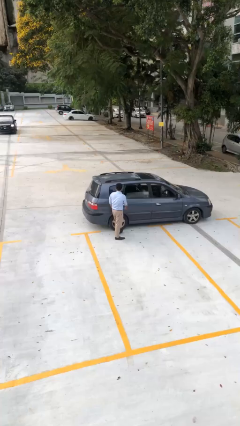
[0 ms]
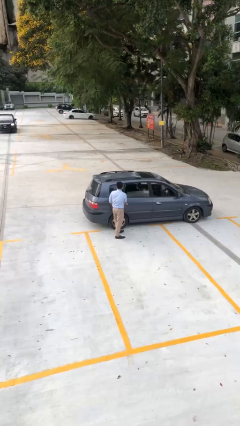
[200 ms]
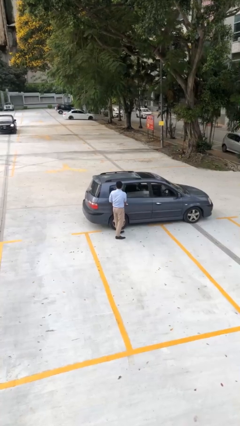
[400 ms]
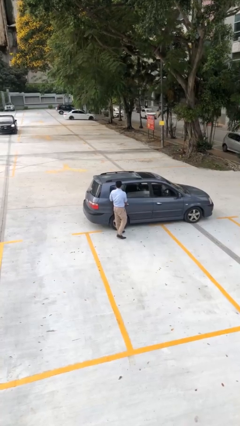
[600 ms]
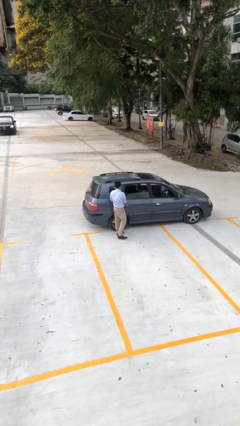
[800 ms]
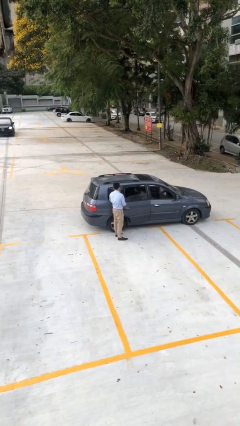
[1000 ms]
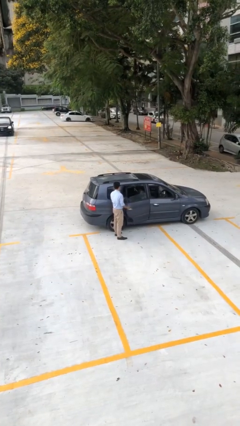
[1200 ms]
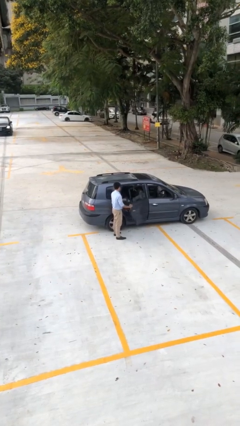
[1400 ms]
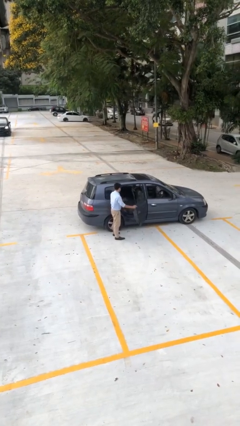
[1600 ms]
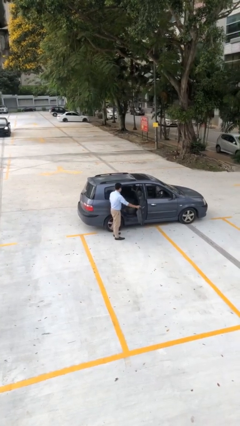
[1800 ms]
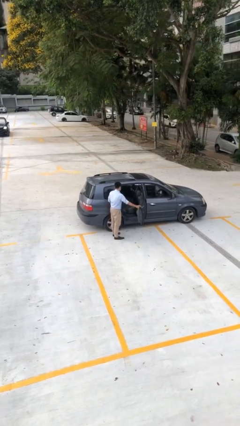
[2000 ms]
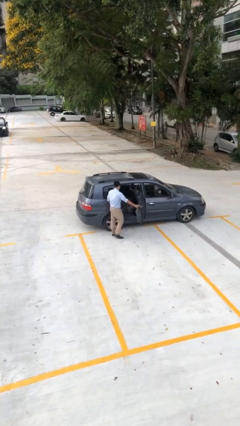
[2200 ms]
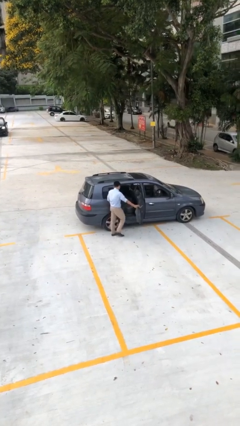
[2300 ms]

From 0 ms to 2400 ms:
person opens car door

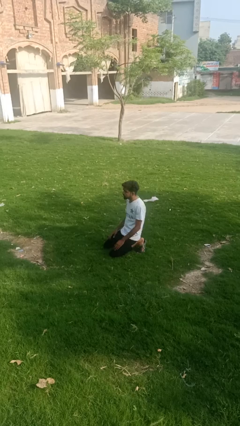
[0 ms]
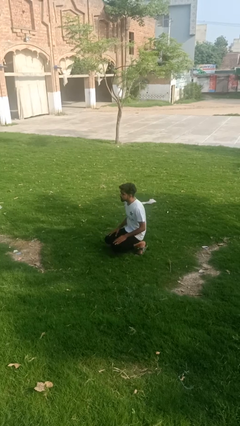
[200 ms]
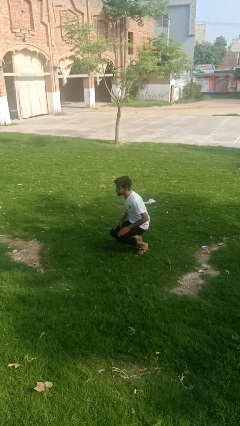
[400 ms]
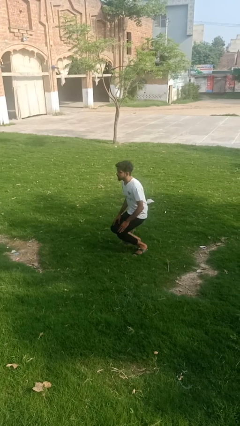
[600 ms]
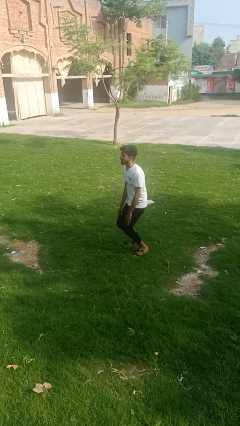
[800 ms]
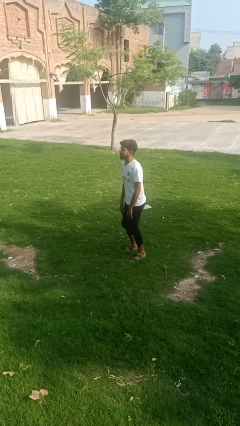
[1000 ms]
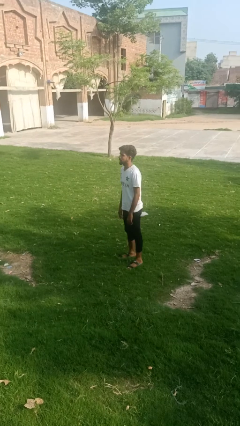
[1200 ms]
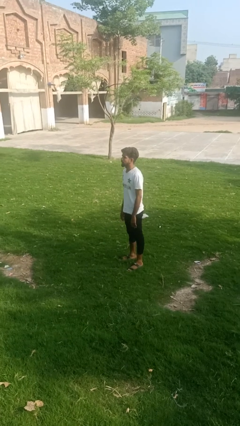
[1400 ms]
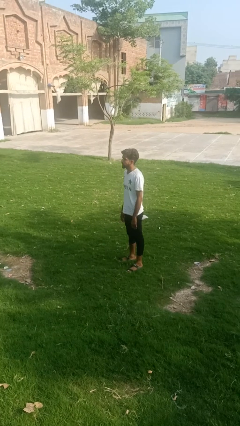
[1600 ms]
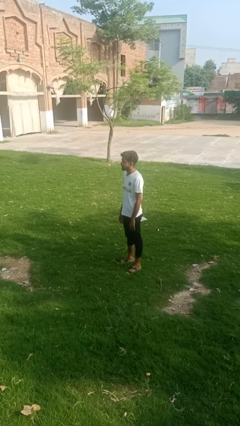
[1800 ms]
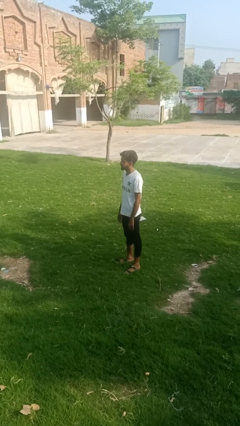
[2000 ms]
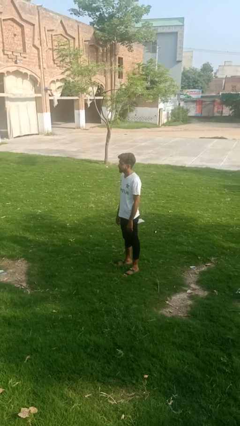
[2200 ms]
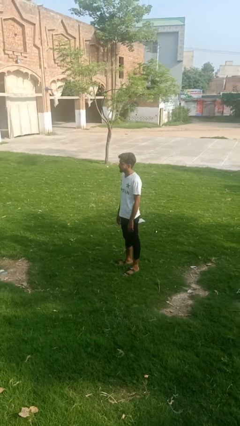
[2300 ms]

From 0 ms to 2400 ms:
person stands up from floor

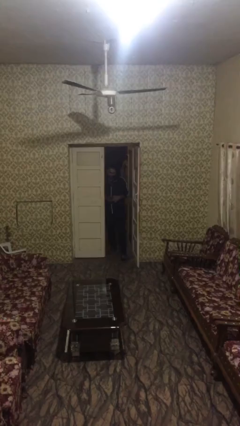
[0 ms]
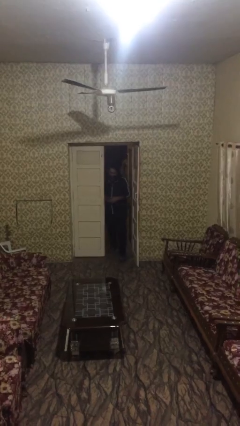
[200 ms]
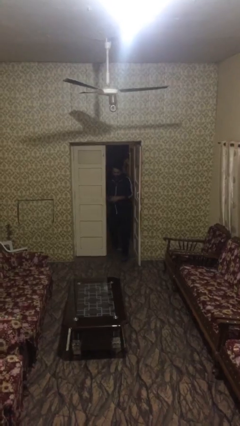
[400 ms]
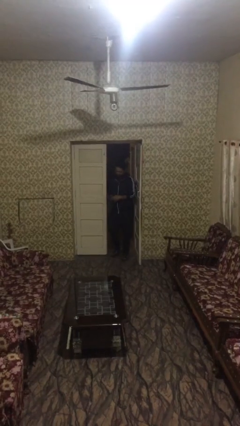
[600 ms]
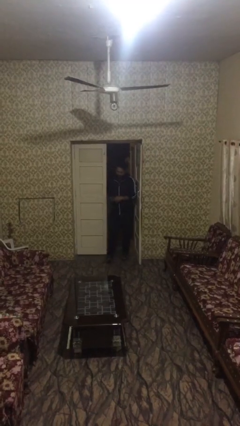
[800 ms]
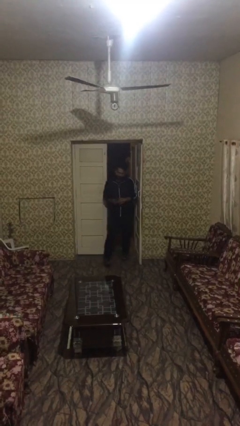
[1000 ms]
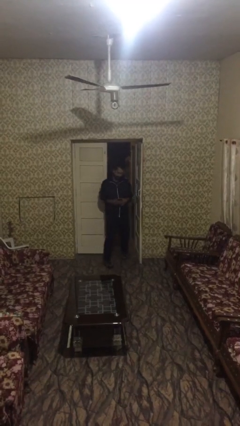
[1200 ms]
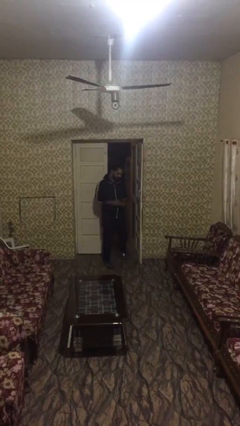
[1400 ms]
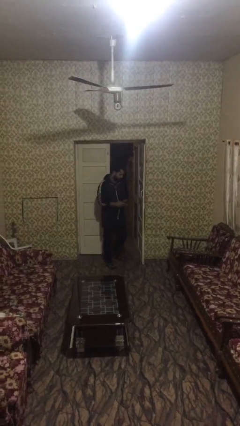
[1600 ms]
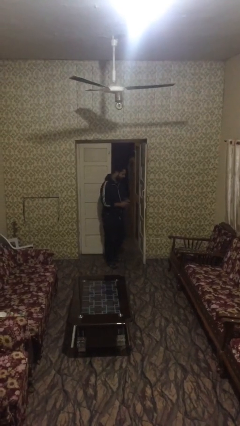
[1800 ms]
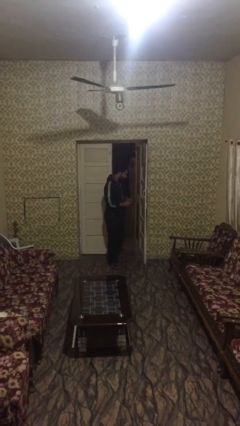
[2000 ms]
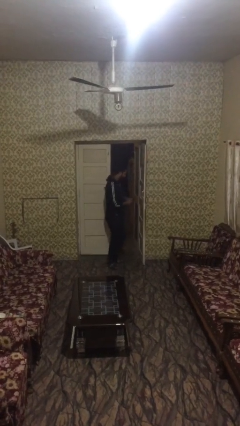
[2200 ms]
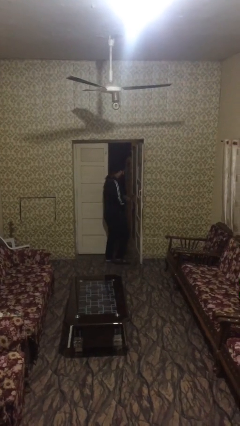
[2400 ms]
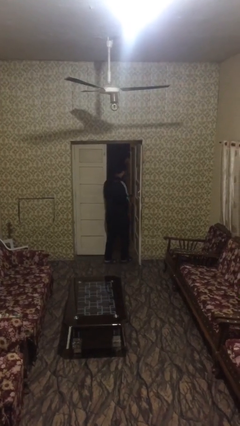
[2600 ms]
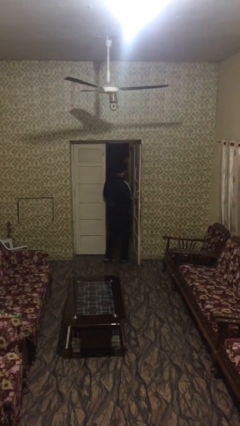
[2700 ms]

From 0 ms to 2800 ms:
person enters scene through structure

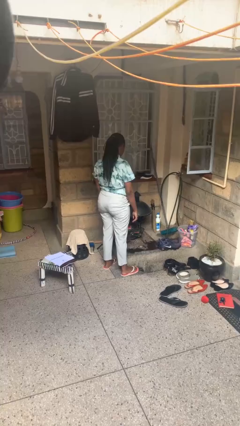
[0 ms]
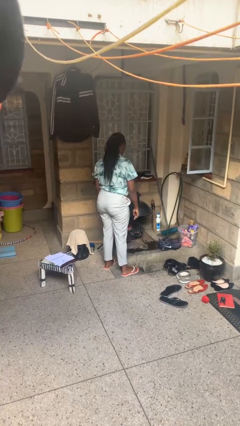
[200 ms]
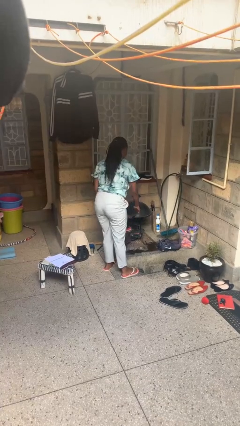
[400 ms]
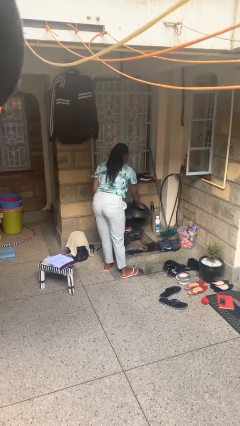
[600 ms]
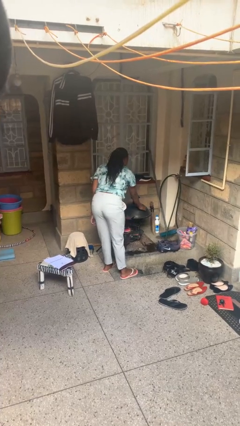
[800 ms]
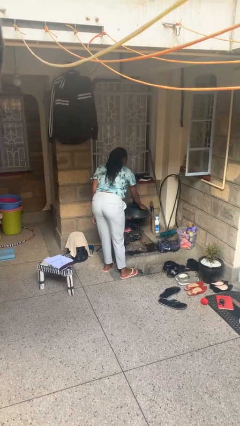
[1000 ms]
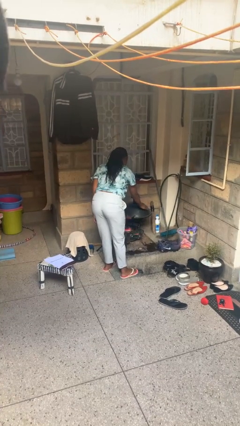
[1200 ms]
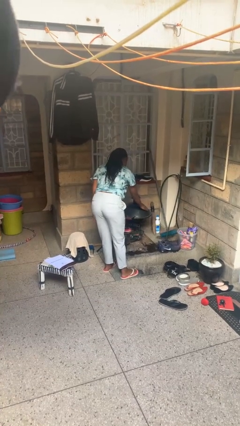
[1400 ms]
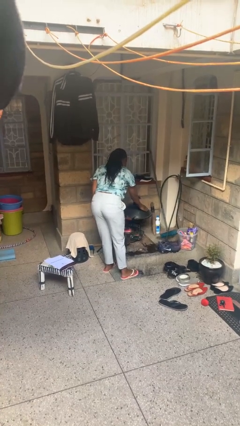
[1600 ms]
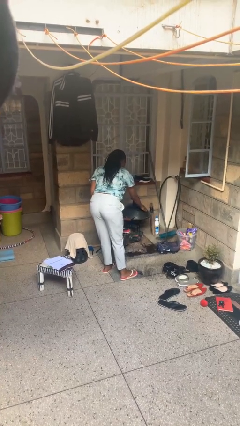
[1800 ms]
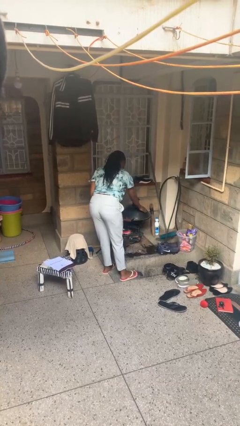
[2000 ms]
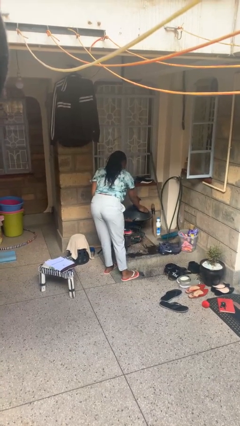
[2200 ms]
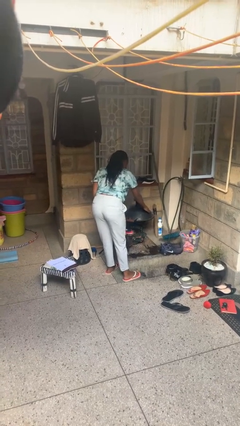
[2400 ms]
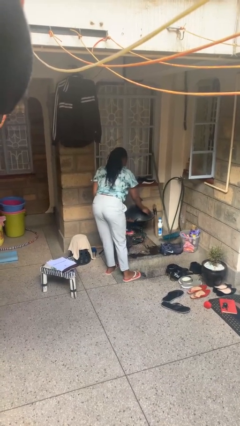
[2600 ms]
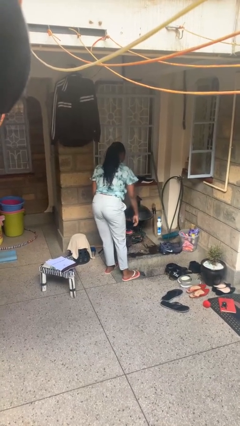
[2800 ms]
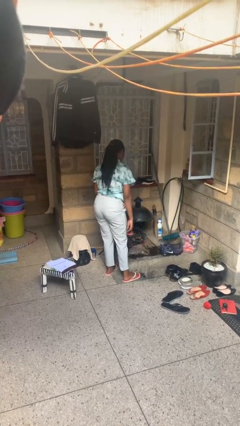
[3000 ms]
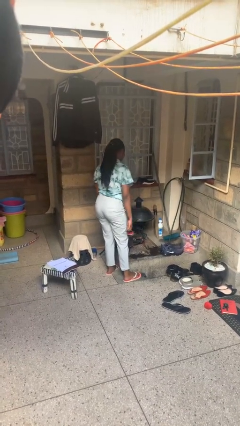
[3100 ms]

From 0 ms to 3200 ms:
person taps object with finger

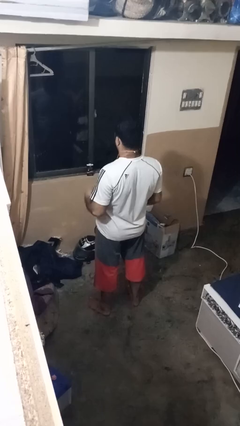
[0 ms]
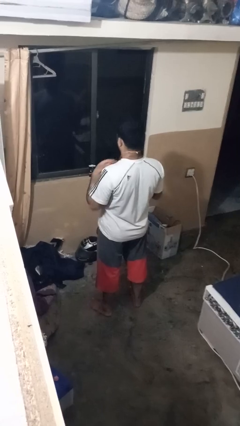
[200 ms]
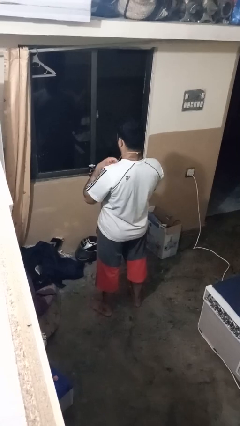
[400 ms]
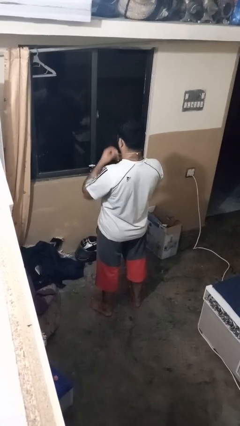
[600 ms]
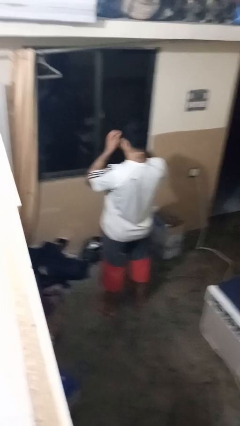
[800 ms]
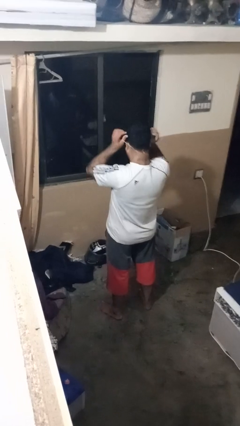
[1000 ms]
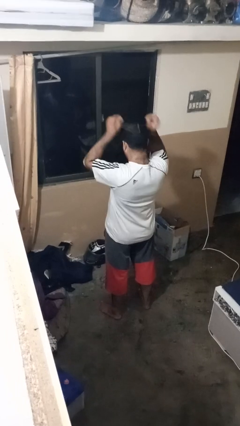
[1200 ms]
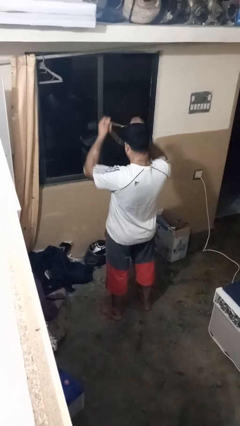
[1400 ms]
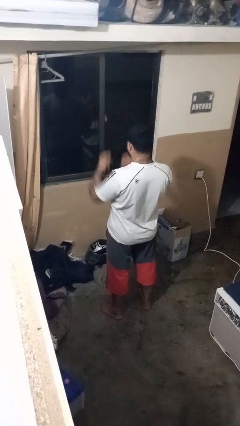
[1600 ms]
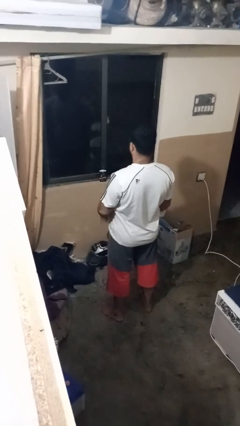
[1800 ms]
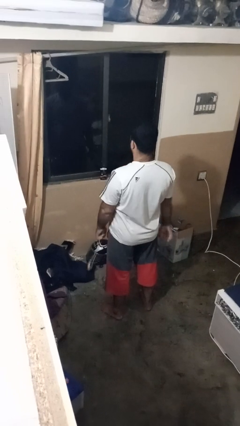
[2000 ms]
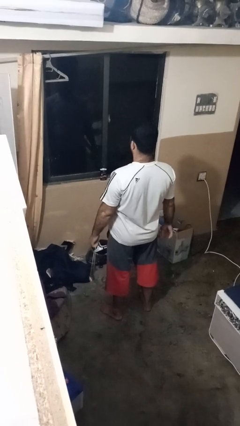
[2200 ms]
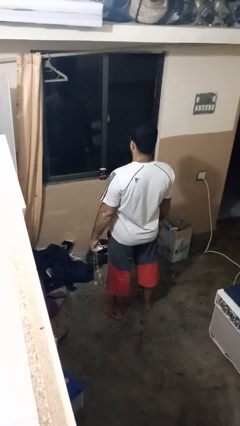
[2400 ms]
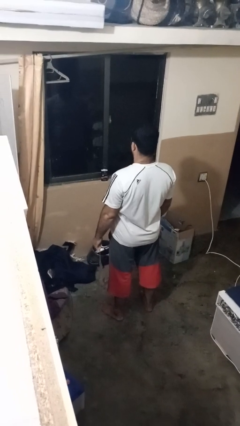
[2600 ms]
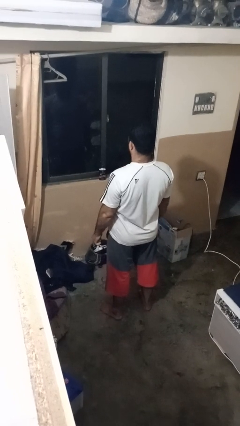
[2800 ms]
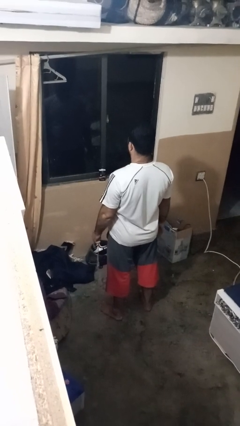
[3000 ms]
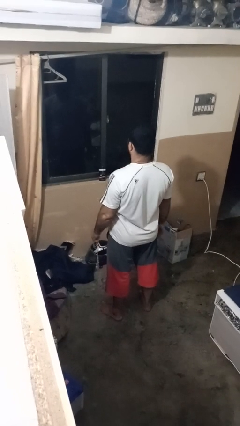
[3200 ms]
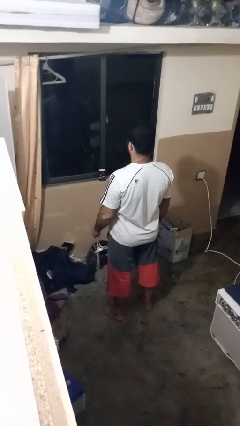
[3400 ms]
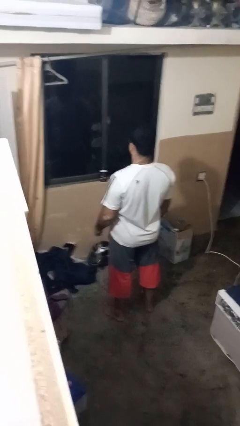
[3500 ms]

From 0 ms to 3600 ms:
person takes off necklace

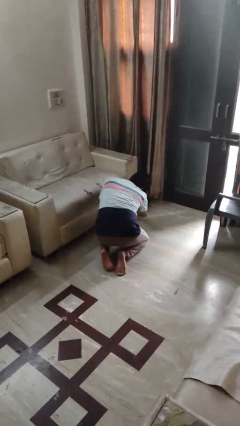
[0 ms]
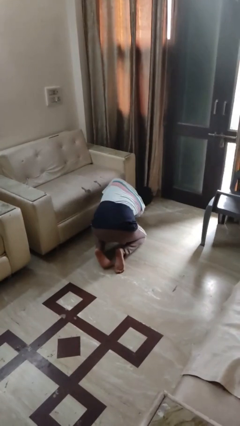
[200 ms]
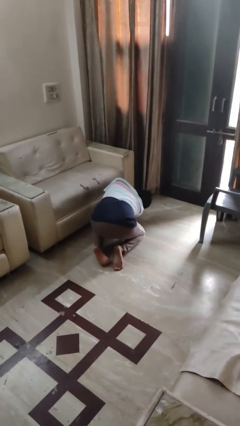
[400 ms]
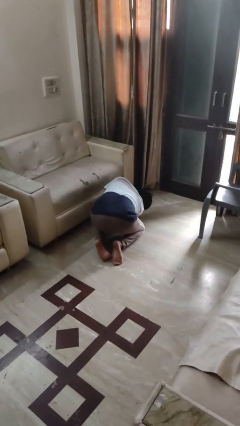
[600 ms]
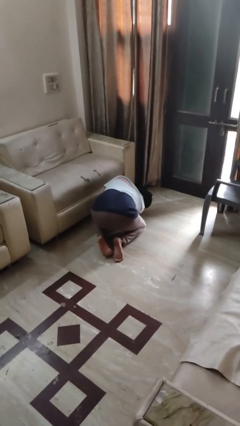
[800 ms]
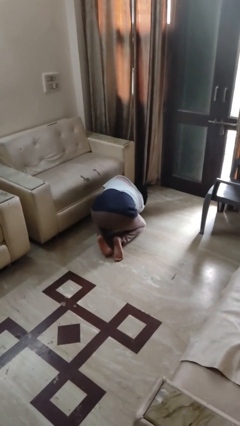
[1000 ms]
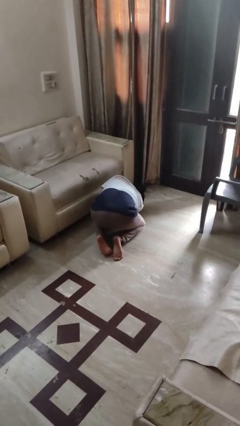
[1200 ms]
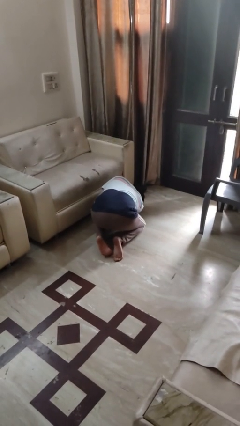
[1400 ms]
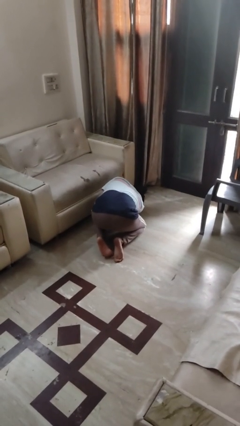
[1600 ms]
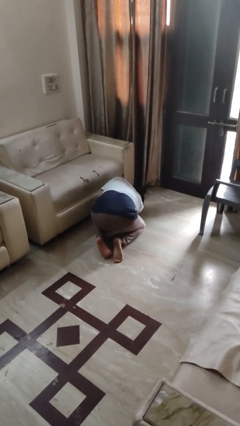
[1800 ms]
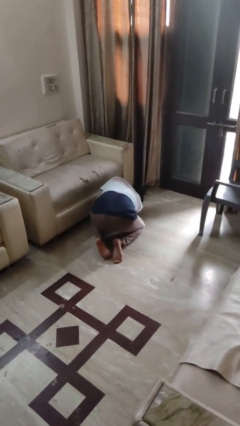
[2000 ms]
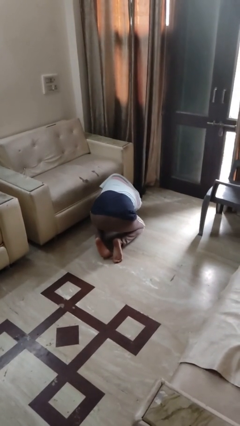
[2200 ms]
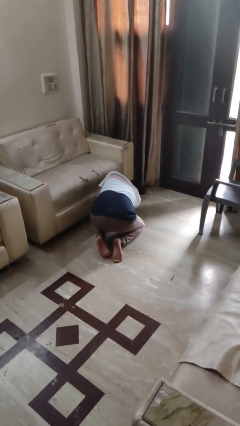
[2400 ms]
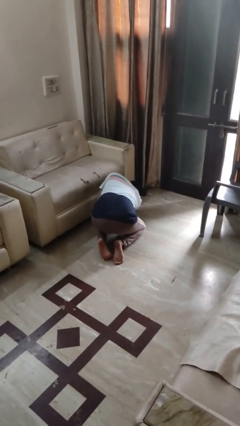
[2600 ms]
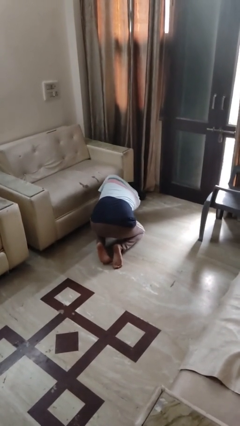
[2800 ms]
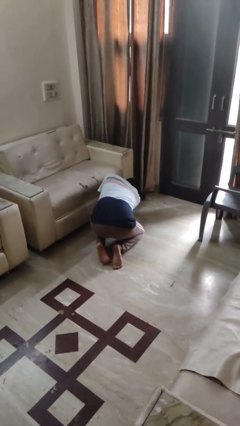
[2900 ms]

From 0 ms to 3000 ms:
person searches under couch

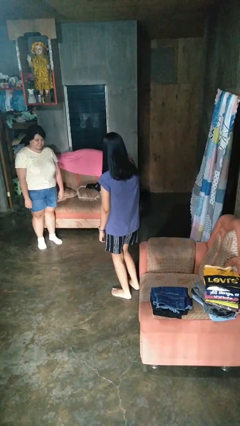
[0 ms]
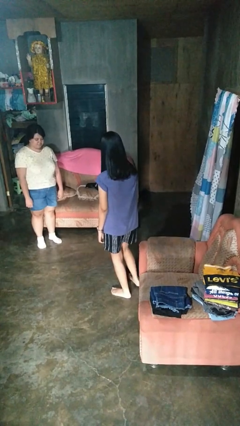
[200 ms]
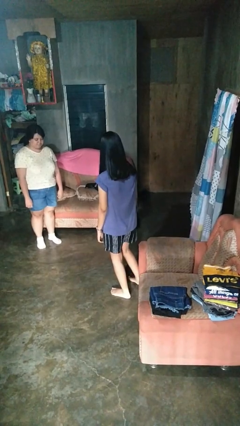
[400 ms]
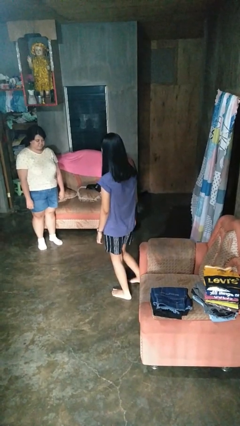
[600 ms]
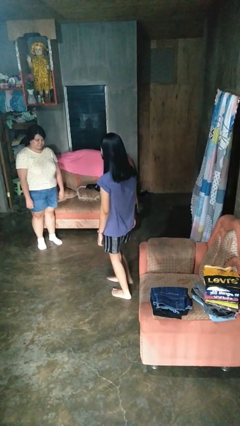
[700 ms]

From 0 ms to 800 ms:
person kicks object to person
